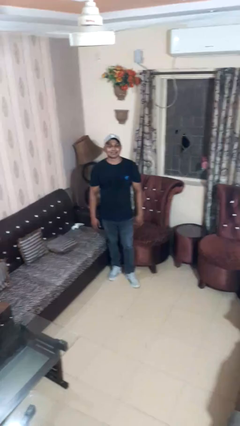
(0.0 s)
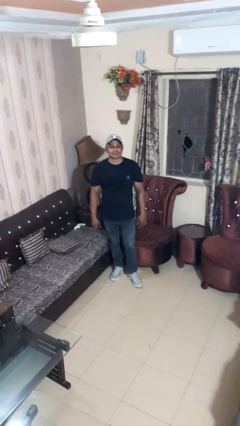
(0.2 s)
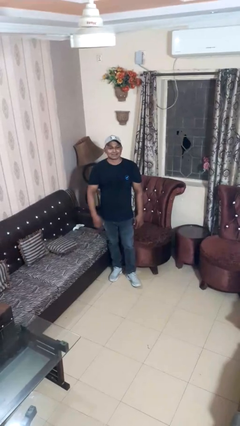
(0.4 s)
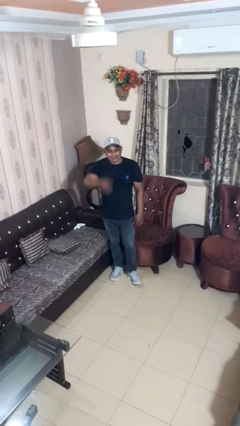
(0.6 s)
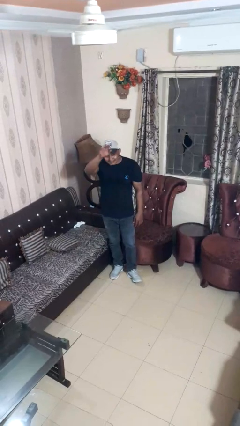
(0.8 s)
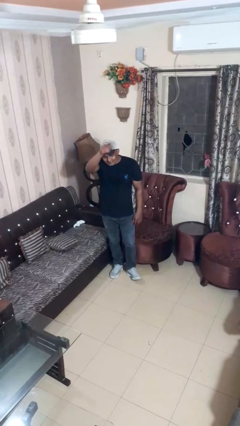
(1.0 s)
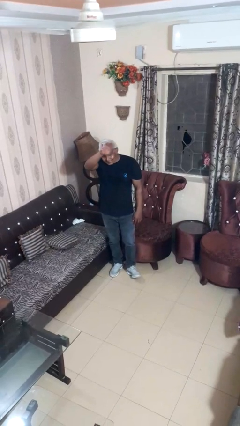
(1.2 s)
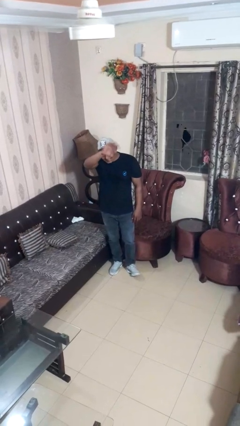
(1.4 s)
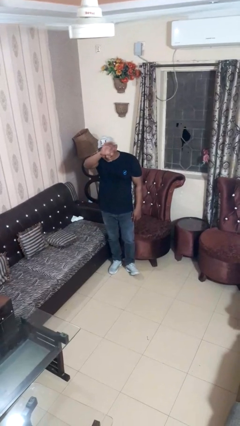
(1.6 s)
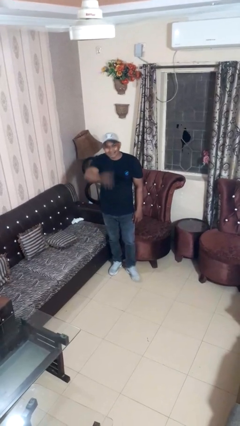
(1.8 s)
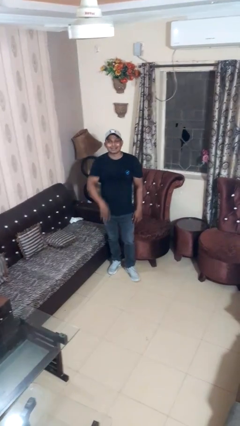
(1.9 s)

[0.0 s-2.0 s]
person waves at person

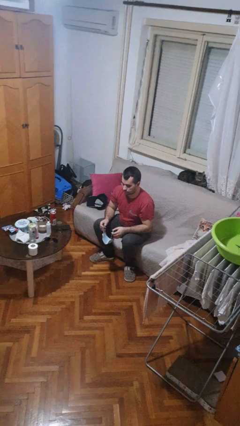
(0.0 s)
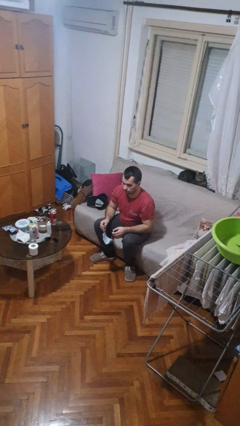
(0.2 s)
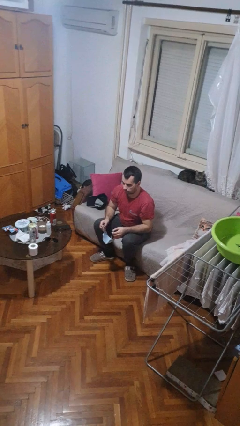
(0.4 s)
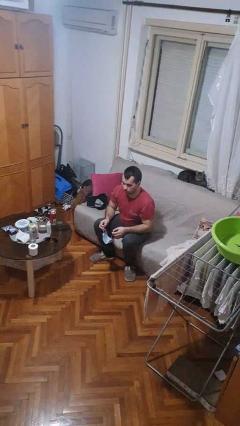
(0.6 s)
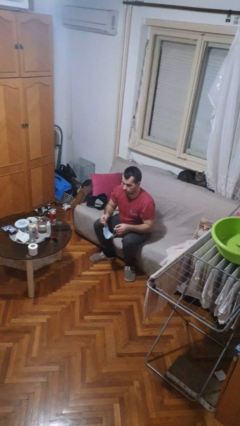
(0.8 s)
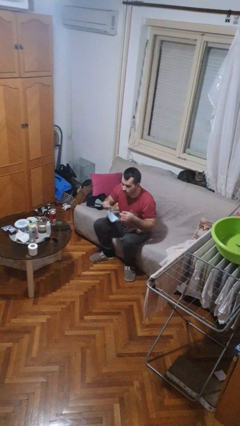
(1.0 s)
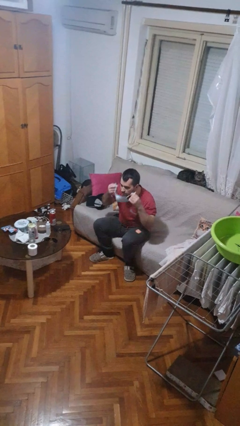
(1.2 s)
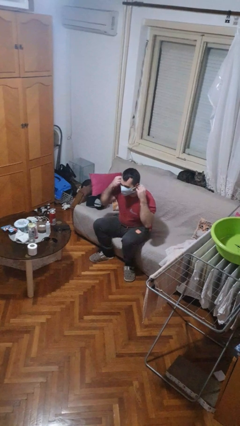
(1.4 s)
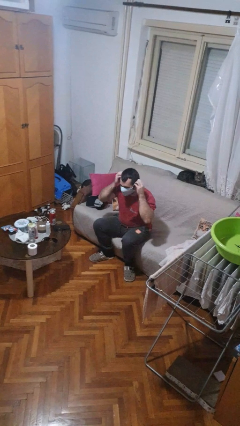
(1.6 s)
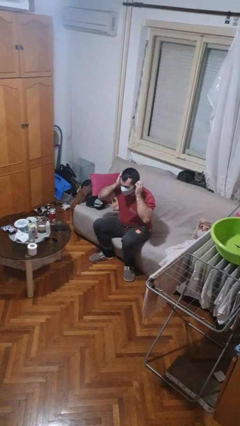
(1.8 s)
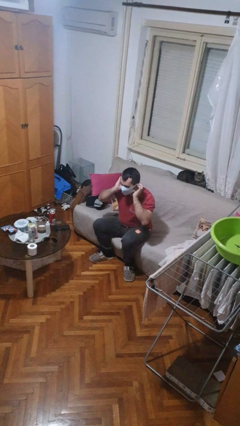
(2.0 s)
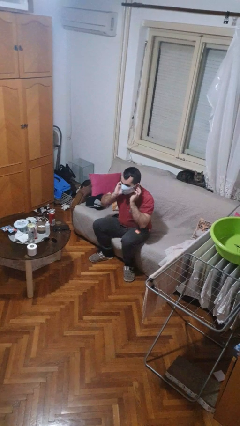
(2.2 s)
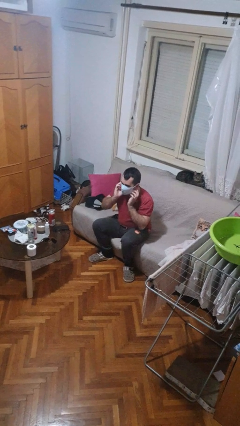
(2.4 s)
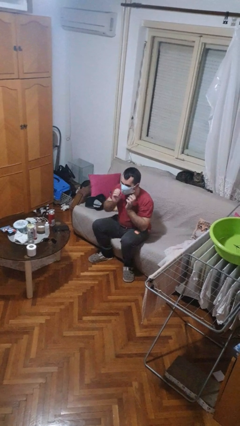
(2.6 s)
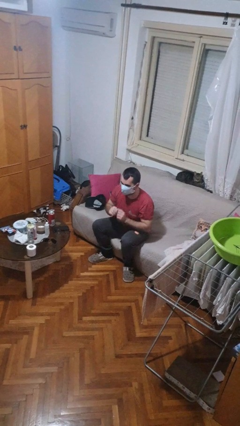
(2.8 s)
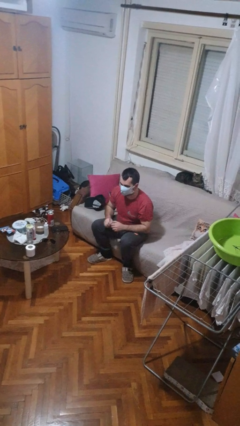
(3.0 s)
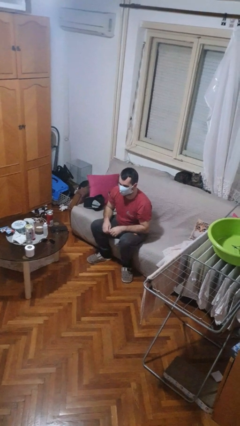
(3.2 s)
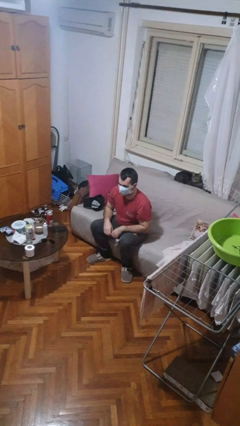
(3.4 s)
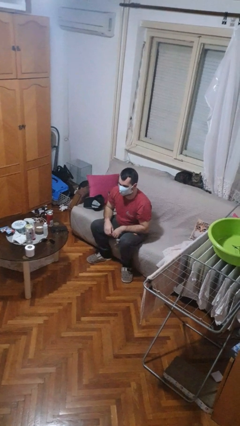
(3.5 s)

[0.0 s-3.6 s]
person puts on facemask

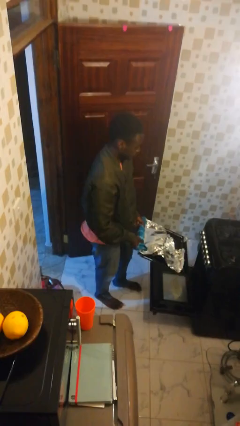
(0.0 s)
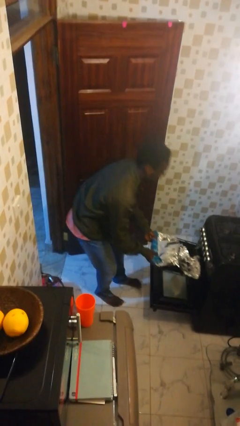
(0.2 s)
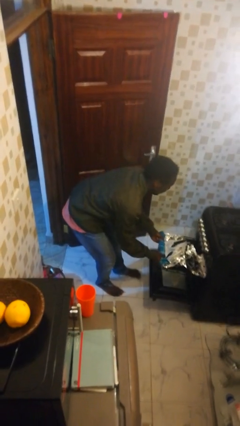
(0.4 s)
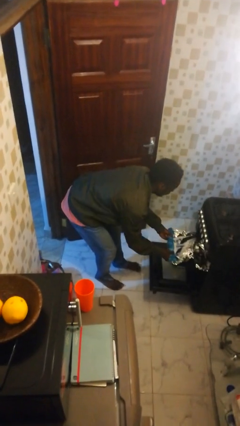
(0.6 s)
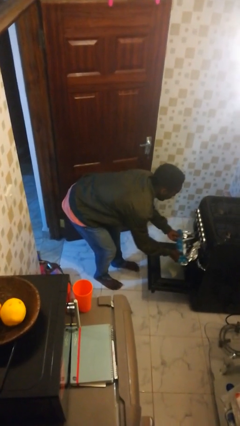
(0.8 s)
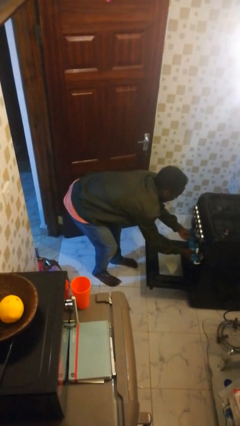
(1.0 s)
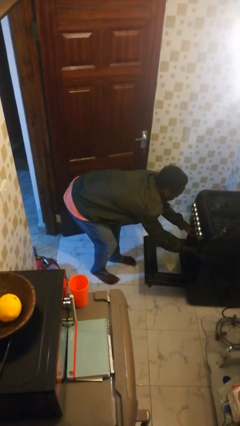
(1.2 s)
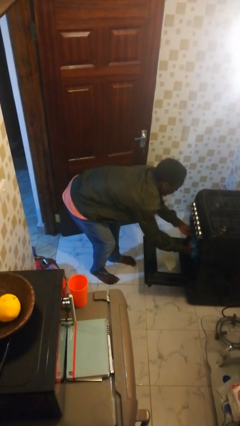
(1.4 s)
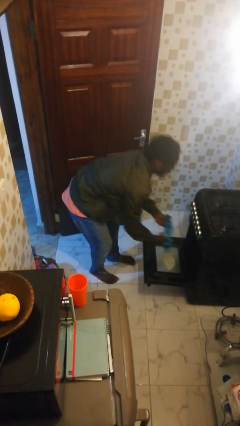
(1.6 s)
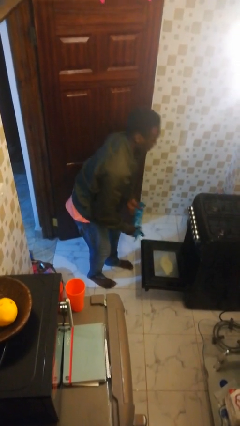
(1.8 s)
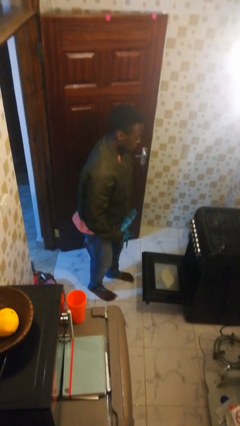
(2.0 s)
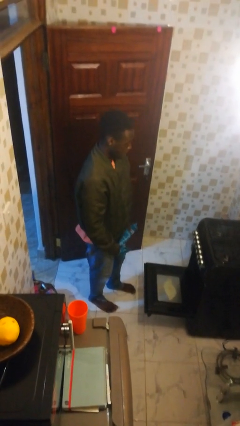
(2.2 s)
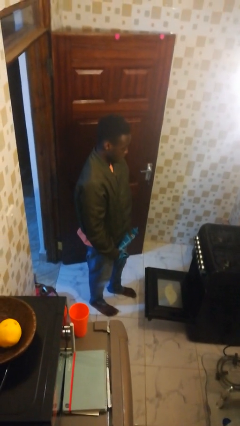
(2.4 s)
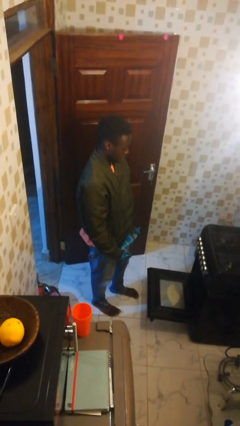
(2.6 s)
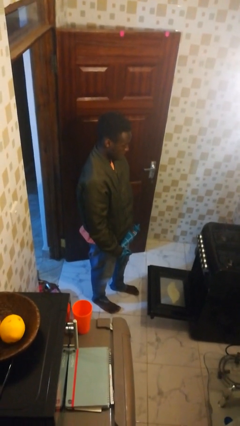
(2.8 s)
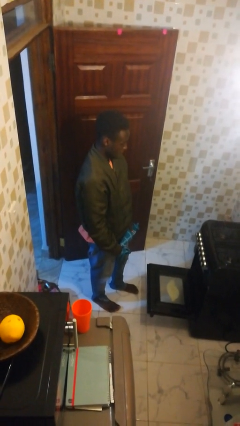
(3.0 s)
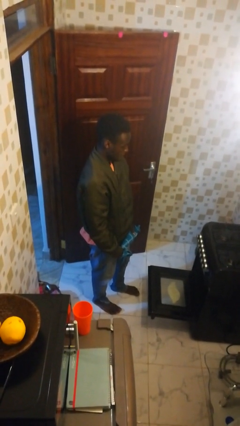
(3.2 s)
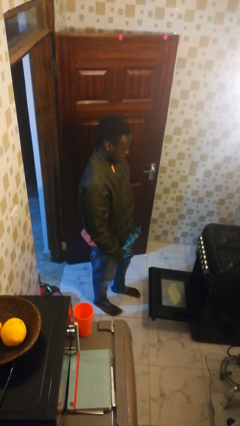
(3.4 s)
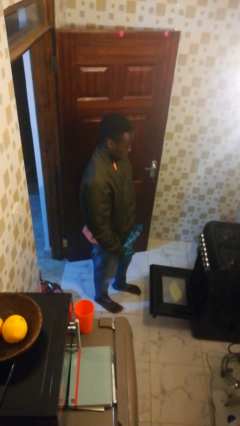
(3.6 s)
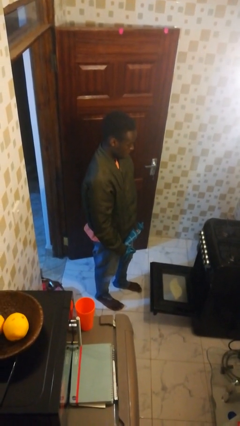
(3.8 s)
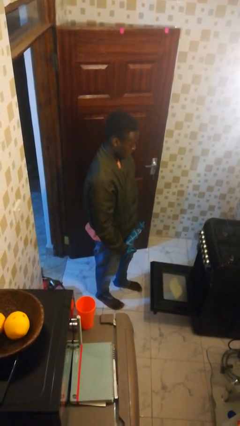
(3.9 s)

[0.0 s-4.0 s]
person puts object into oven

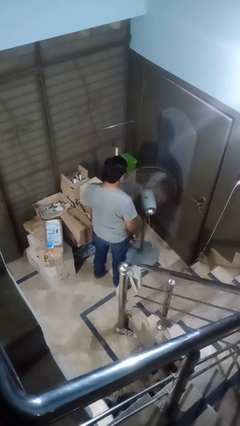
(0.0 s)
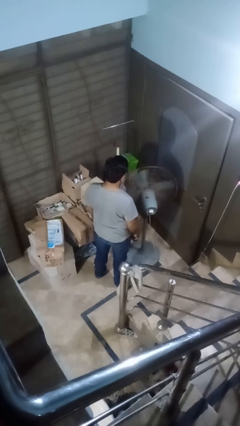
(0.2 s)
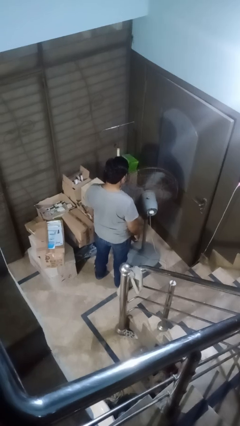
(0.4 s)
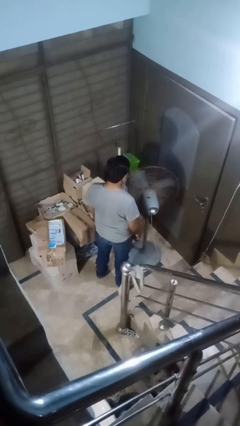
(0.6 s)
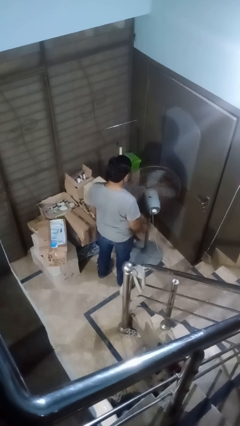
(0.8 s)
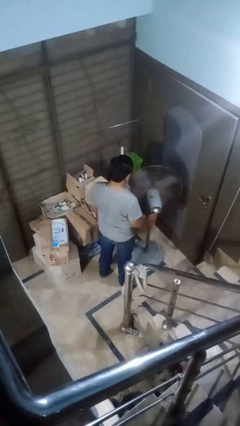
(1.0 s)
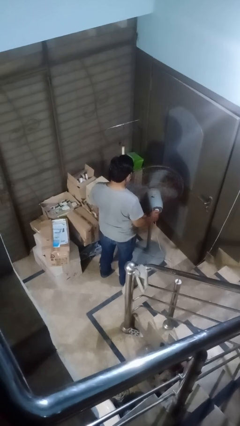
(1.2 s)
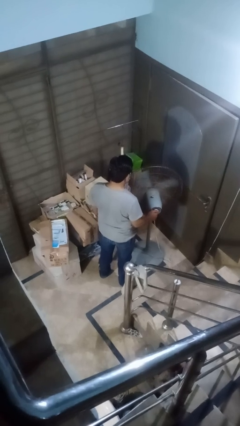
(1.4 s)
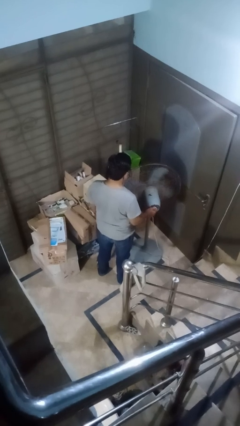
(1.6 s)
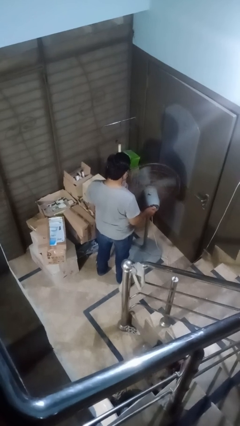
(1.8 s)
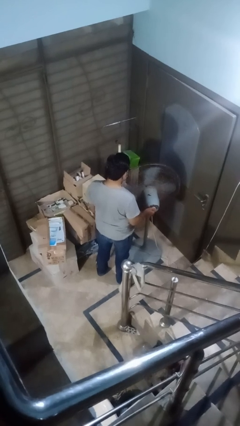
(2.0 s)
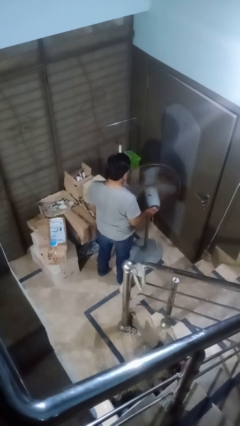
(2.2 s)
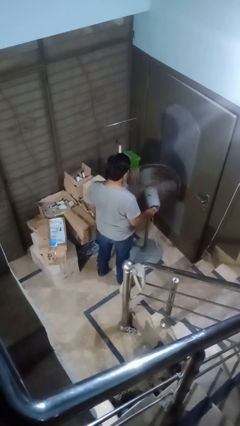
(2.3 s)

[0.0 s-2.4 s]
person turns on fan

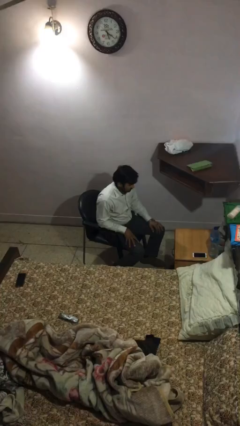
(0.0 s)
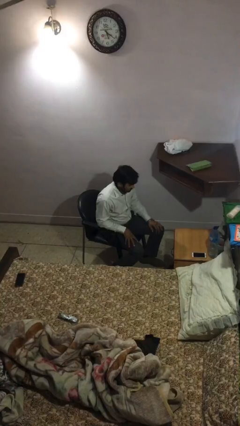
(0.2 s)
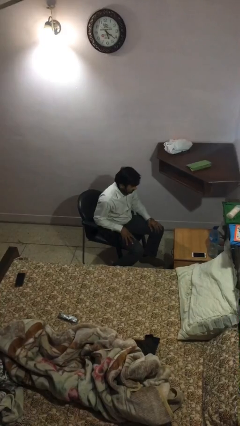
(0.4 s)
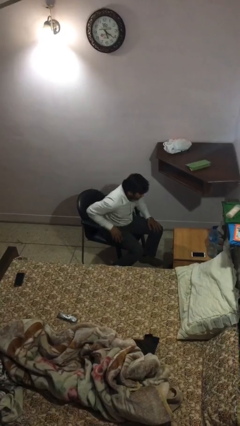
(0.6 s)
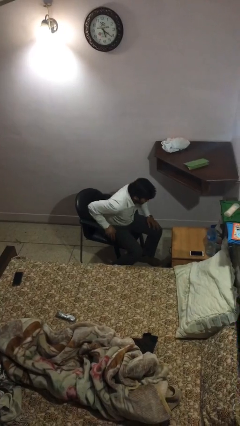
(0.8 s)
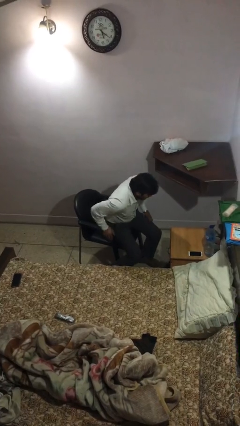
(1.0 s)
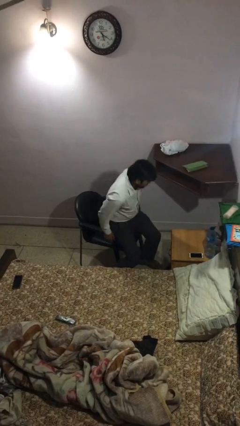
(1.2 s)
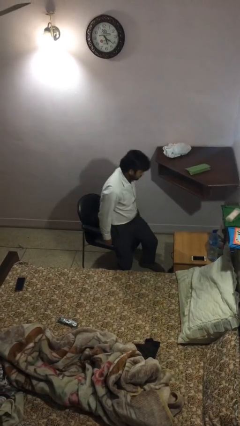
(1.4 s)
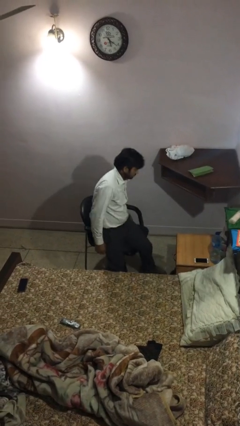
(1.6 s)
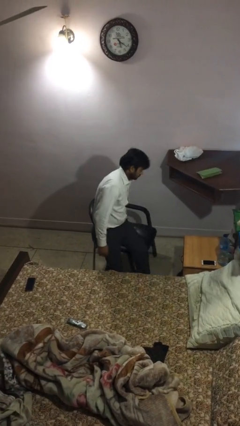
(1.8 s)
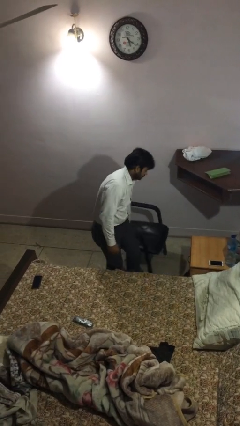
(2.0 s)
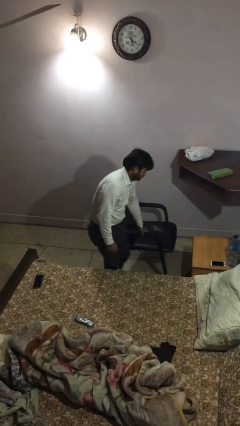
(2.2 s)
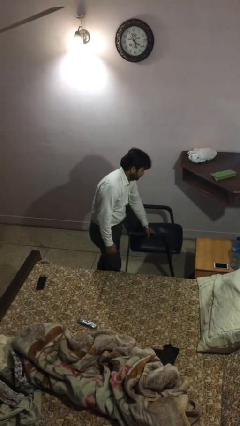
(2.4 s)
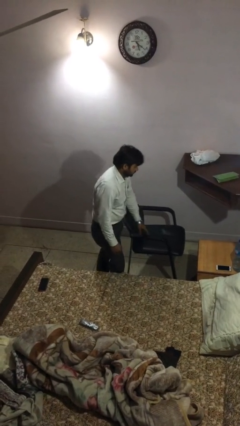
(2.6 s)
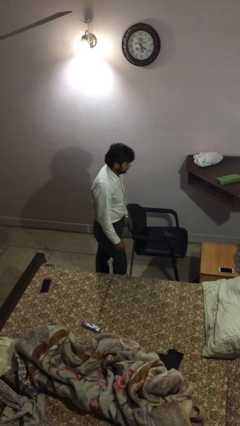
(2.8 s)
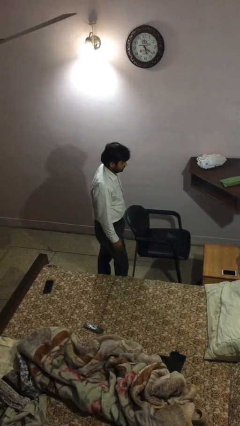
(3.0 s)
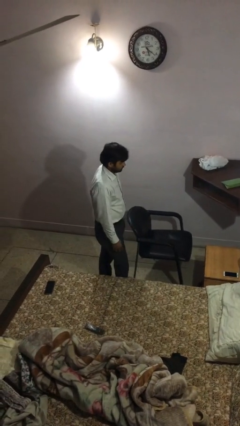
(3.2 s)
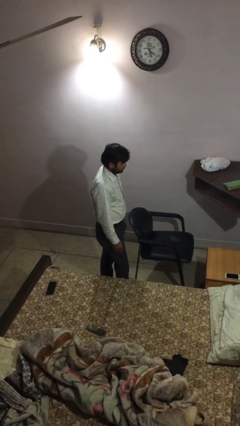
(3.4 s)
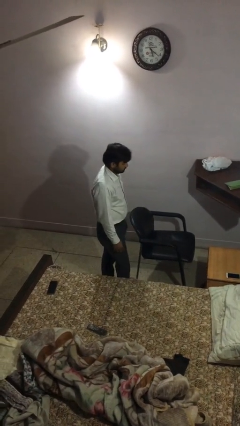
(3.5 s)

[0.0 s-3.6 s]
person stands up

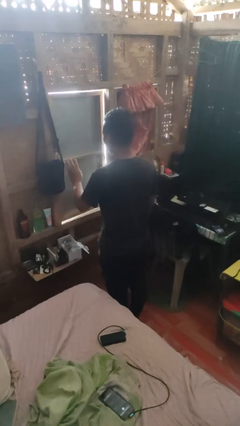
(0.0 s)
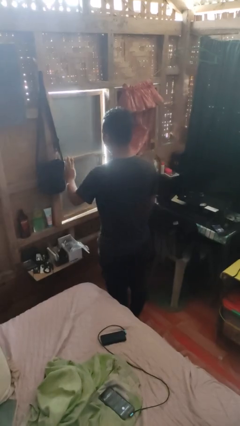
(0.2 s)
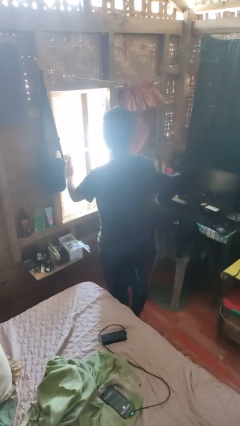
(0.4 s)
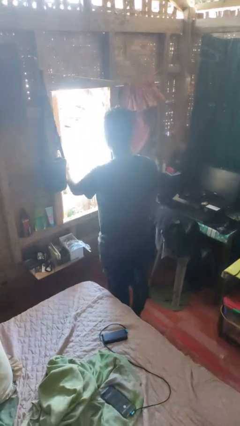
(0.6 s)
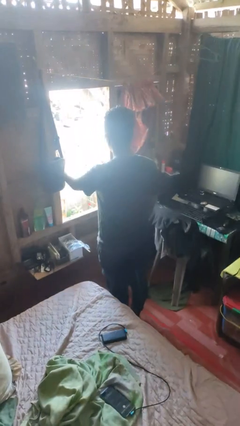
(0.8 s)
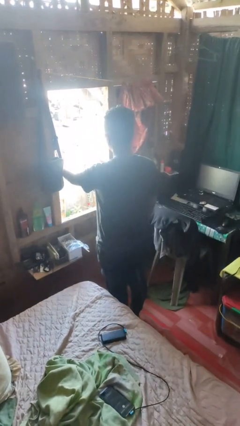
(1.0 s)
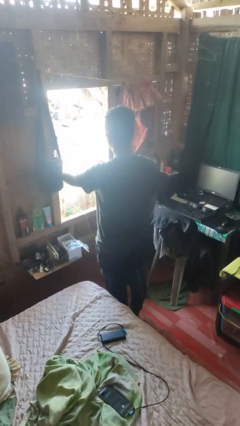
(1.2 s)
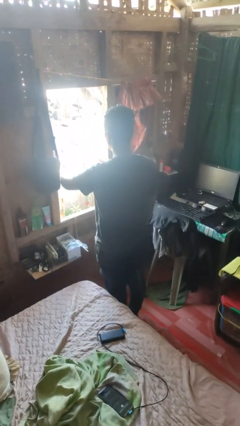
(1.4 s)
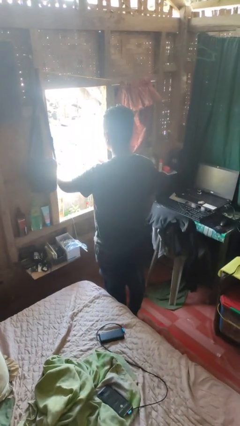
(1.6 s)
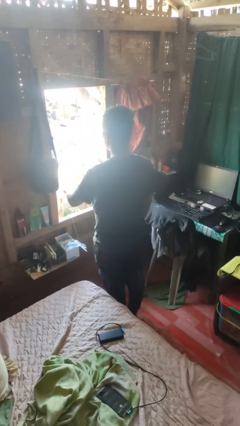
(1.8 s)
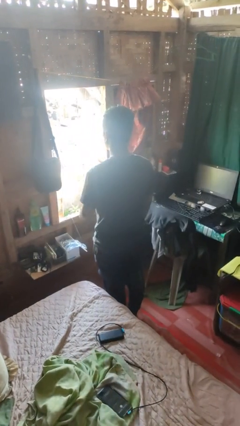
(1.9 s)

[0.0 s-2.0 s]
person opens home window
